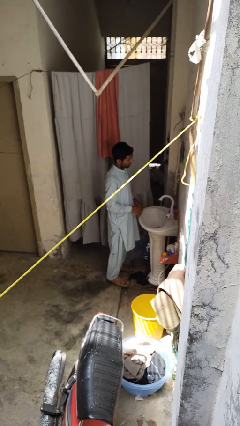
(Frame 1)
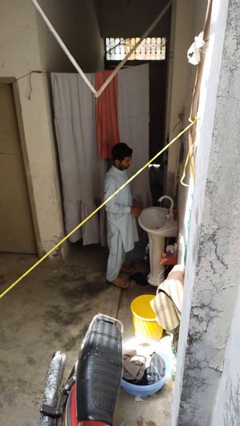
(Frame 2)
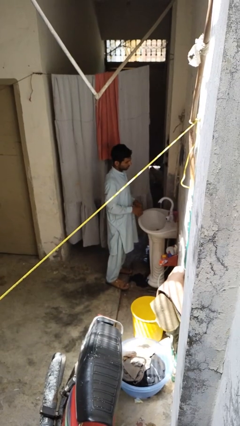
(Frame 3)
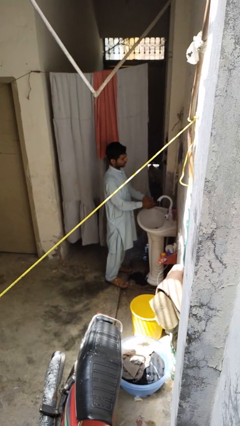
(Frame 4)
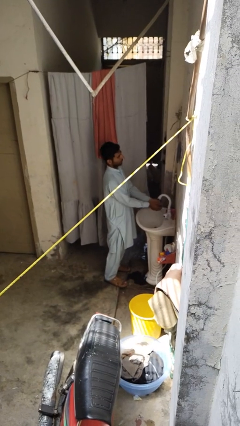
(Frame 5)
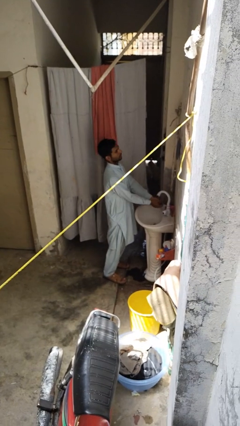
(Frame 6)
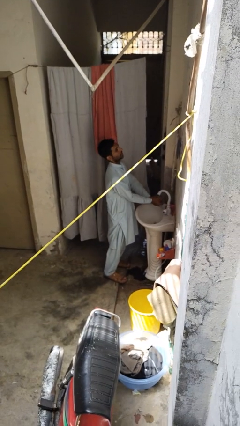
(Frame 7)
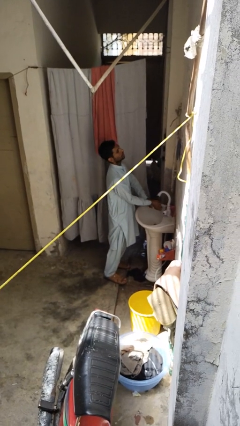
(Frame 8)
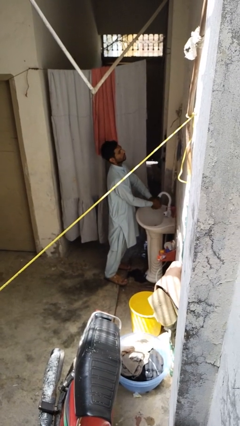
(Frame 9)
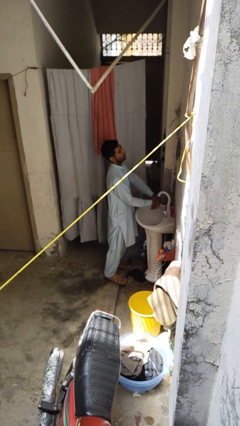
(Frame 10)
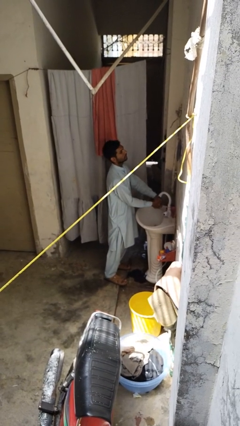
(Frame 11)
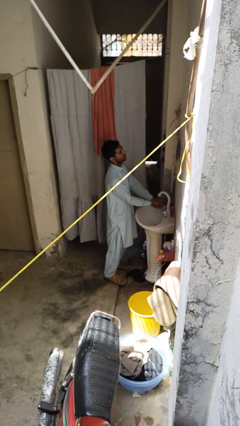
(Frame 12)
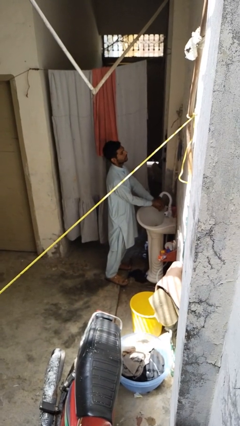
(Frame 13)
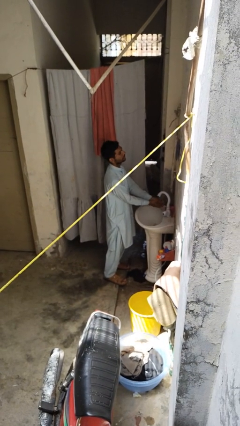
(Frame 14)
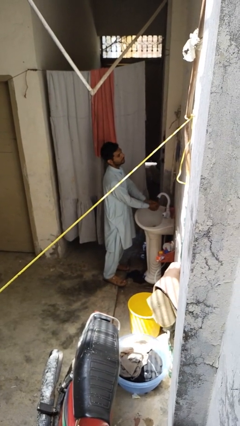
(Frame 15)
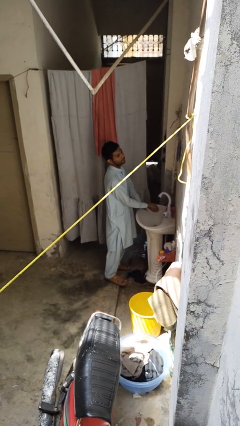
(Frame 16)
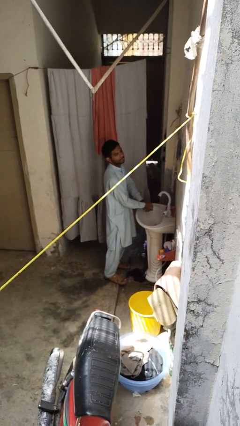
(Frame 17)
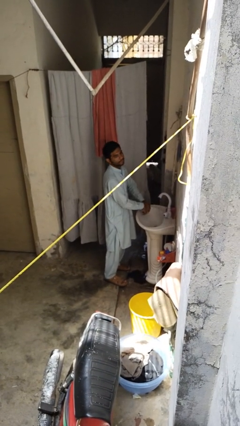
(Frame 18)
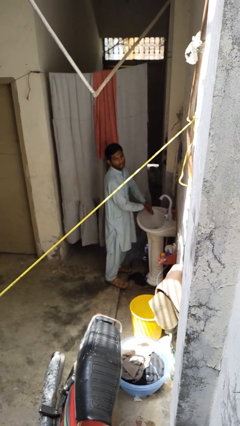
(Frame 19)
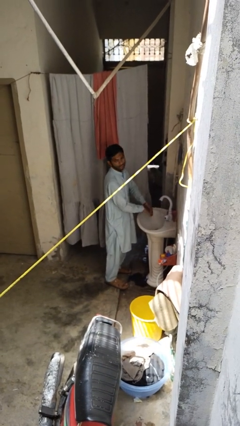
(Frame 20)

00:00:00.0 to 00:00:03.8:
person washes hands

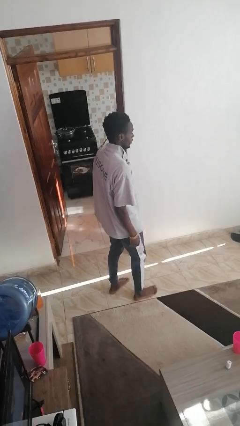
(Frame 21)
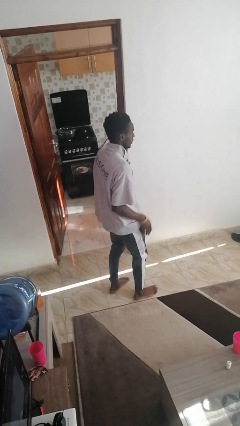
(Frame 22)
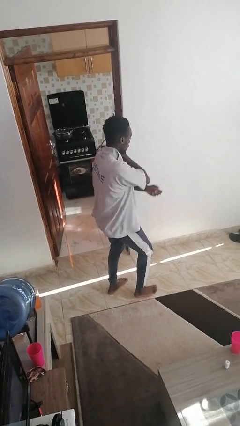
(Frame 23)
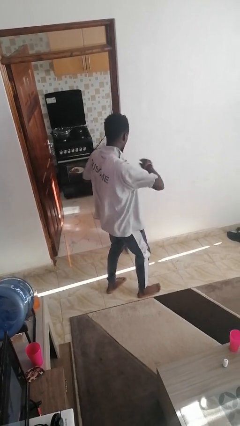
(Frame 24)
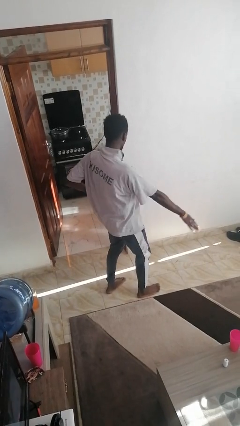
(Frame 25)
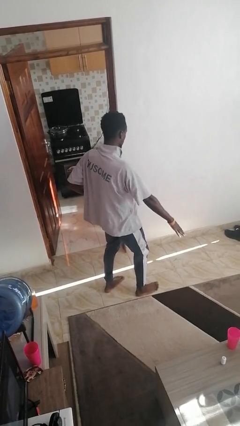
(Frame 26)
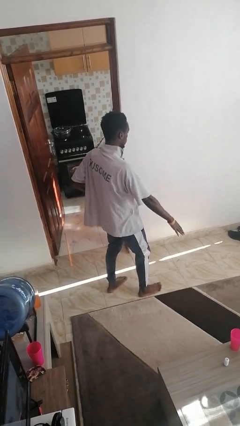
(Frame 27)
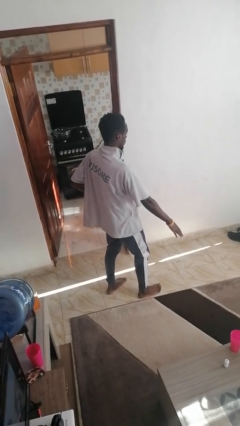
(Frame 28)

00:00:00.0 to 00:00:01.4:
person karate chop

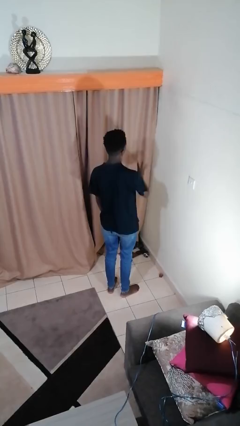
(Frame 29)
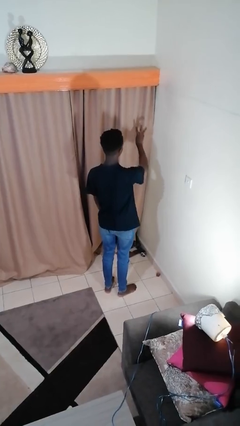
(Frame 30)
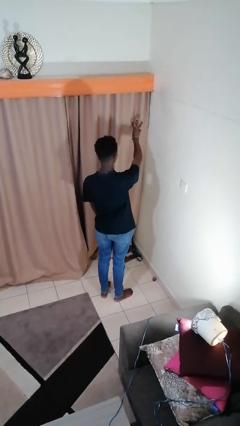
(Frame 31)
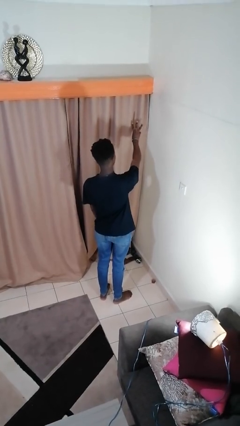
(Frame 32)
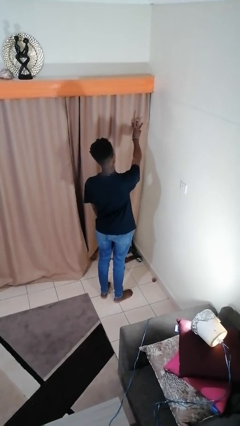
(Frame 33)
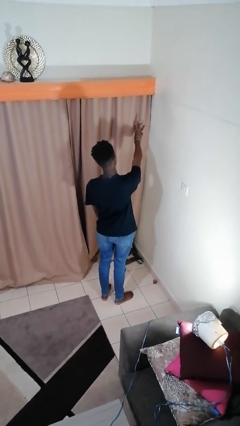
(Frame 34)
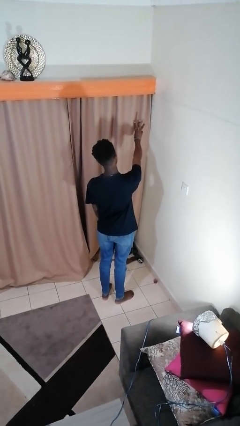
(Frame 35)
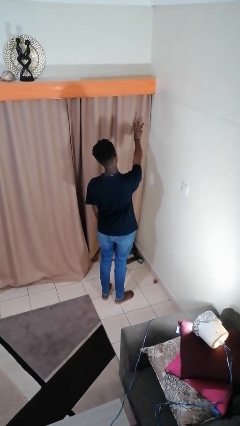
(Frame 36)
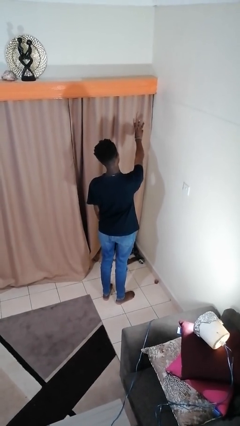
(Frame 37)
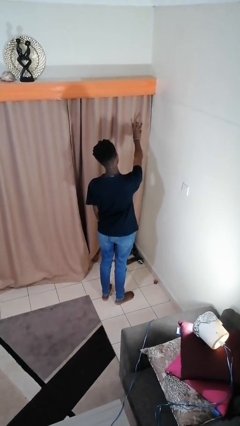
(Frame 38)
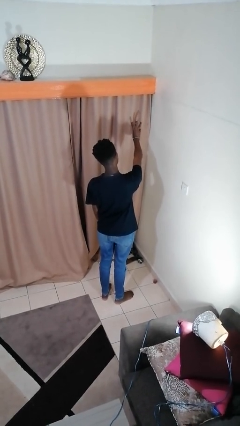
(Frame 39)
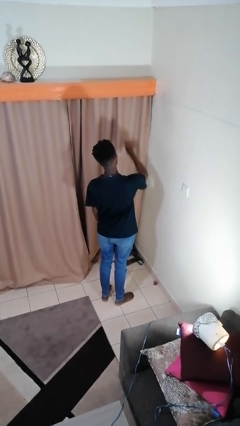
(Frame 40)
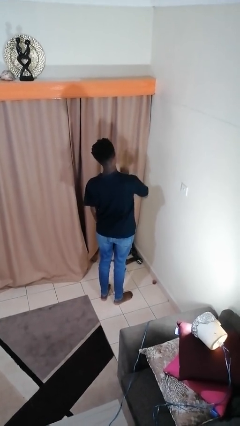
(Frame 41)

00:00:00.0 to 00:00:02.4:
person gestures number three

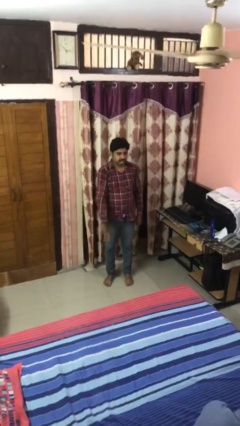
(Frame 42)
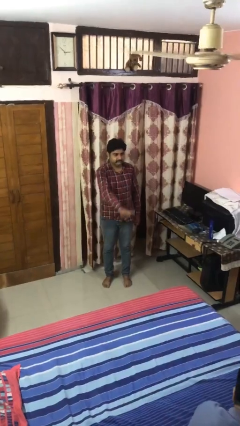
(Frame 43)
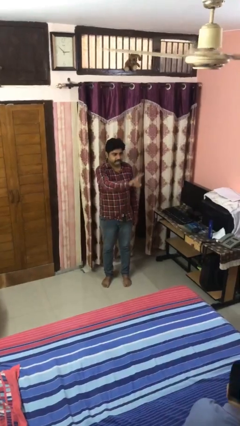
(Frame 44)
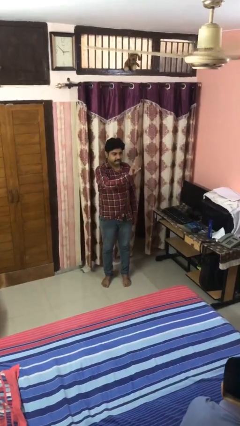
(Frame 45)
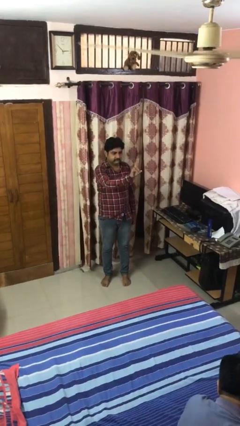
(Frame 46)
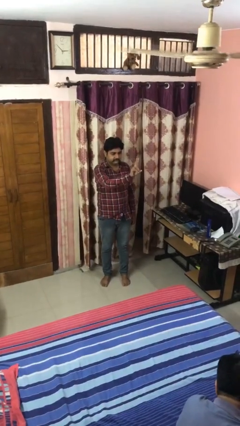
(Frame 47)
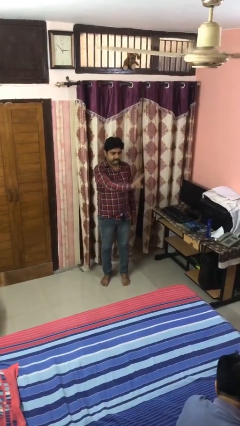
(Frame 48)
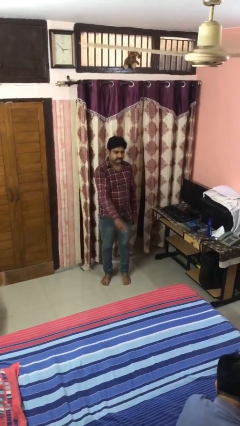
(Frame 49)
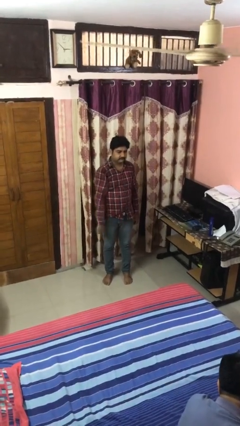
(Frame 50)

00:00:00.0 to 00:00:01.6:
person gestures peace

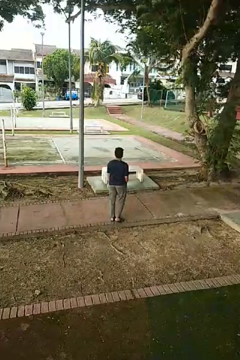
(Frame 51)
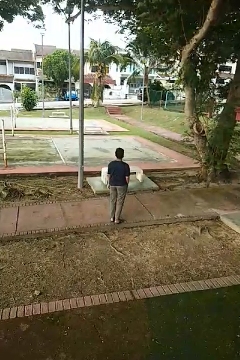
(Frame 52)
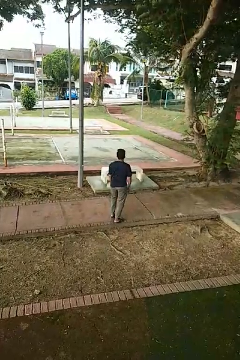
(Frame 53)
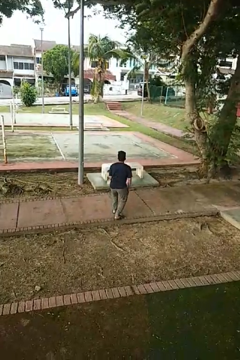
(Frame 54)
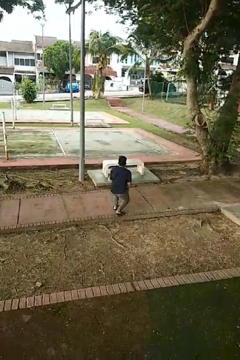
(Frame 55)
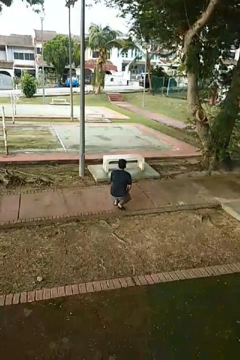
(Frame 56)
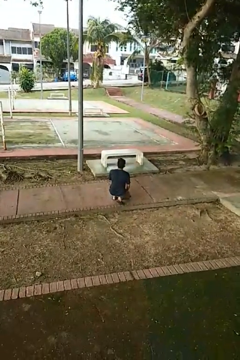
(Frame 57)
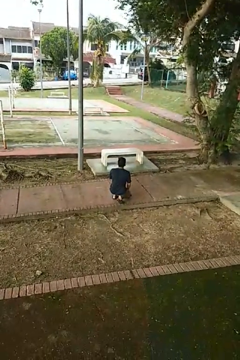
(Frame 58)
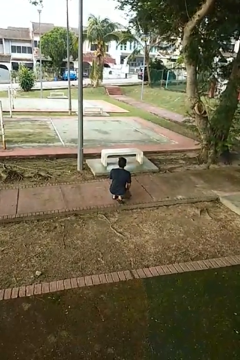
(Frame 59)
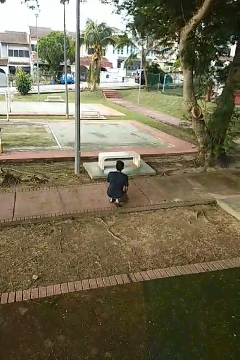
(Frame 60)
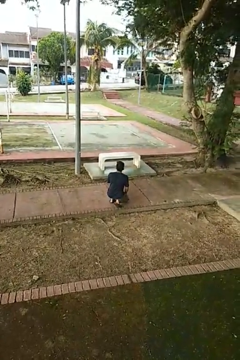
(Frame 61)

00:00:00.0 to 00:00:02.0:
person kneels

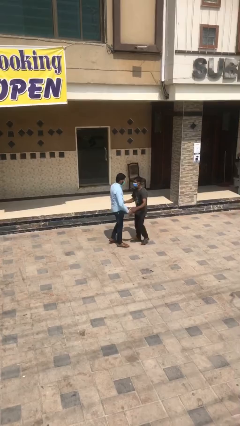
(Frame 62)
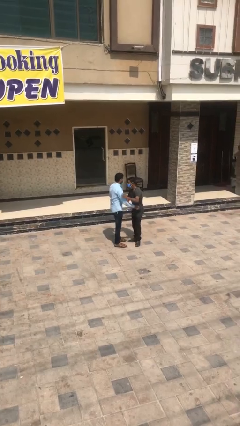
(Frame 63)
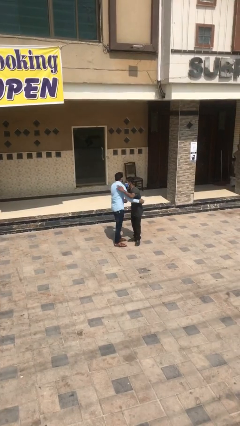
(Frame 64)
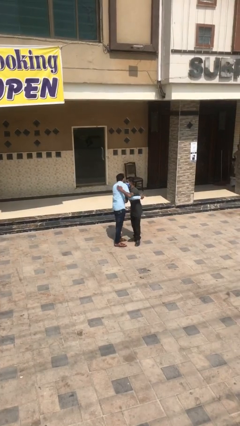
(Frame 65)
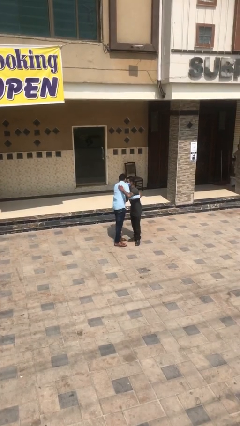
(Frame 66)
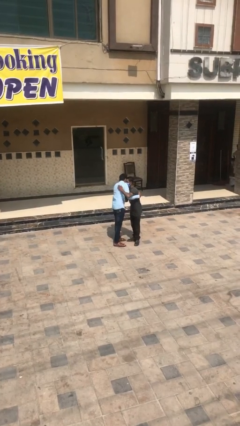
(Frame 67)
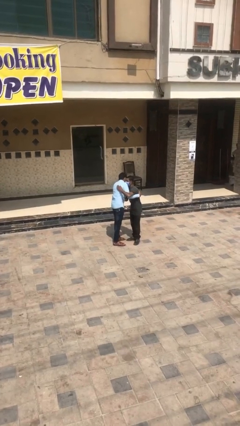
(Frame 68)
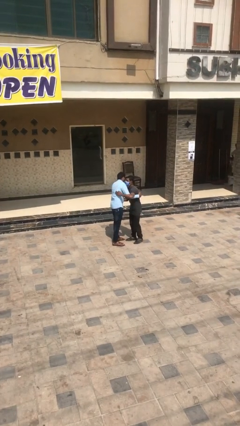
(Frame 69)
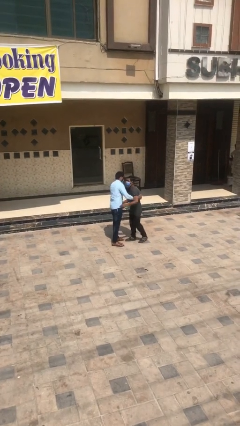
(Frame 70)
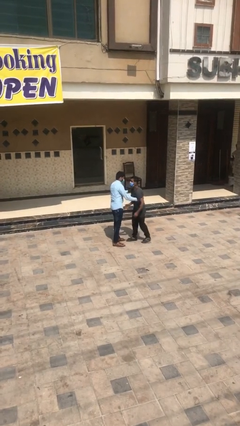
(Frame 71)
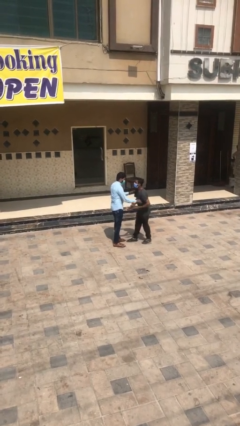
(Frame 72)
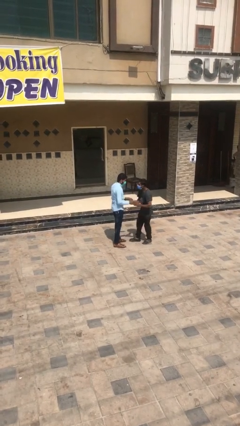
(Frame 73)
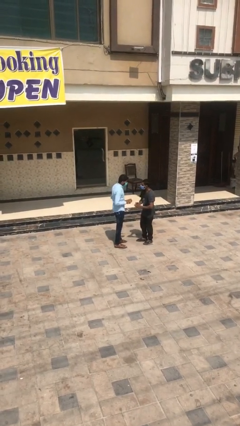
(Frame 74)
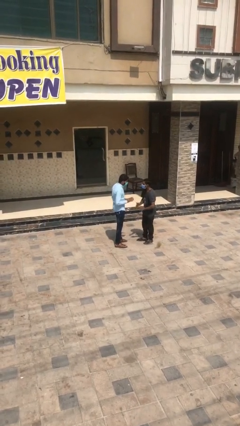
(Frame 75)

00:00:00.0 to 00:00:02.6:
person embraces person

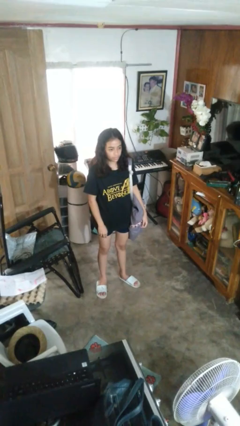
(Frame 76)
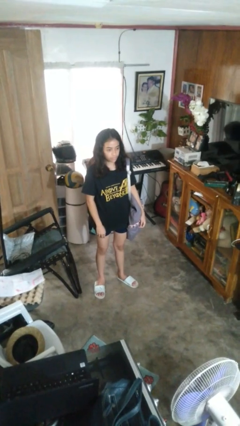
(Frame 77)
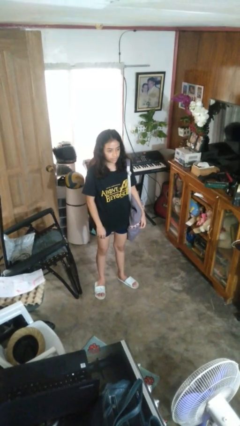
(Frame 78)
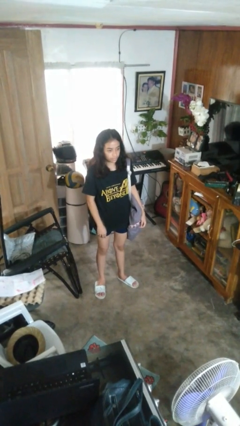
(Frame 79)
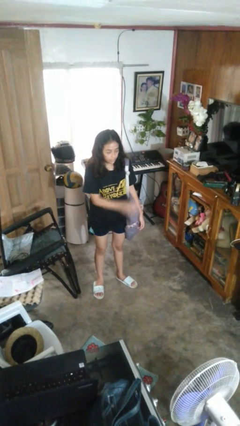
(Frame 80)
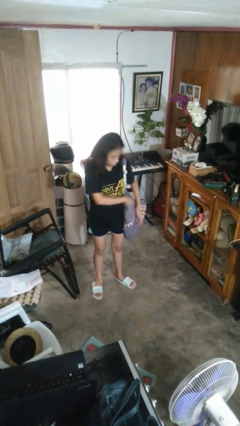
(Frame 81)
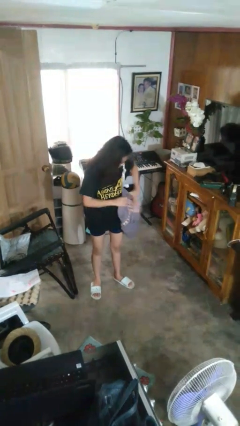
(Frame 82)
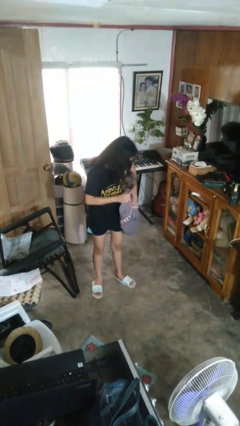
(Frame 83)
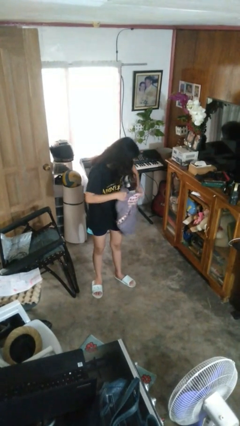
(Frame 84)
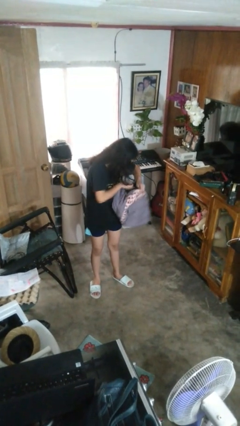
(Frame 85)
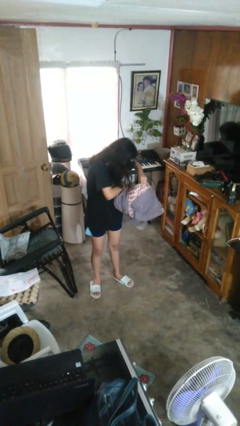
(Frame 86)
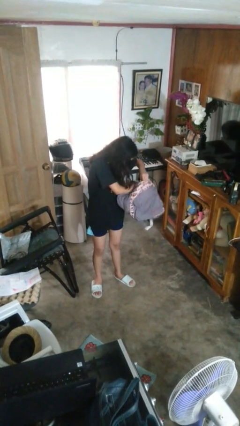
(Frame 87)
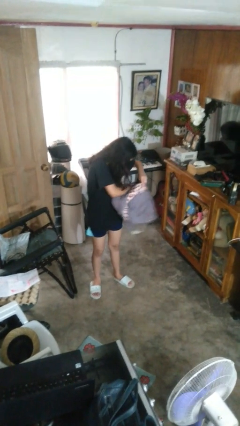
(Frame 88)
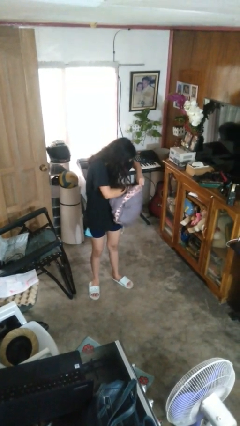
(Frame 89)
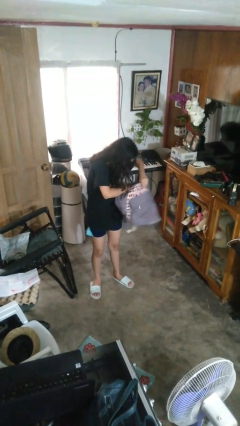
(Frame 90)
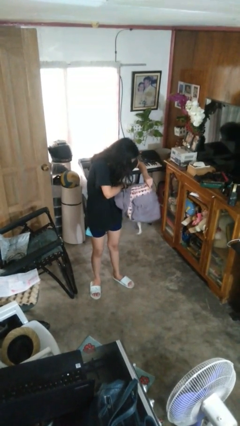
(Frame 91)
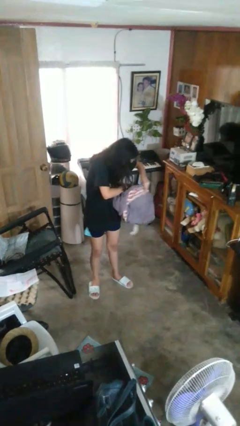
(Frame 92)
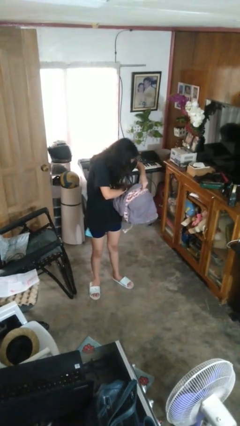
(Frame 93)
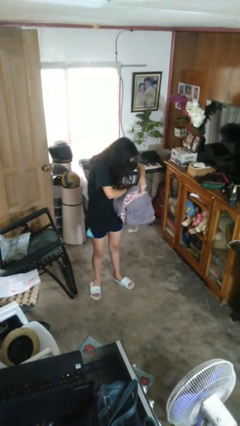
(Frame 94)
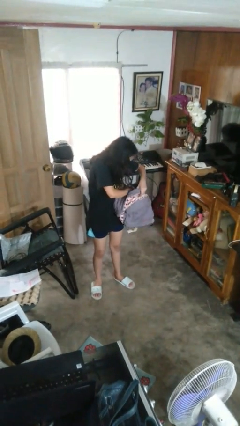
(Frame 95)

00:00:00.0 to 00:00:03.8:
person searches in backpack
